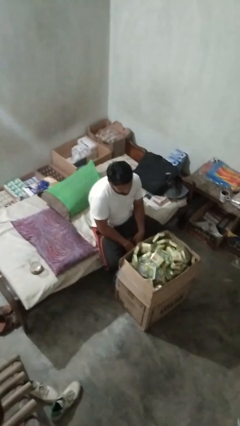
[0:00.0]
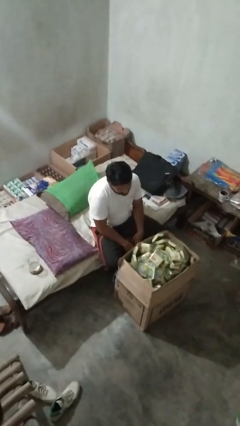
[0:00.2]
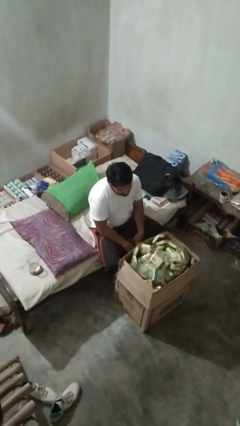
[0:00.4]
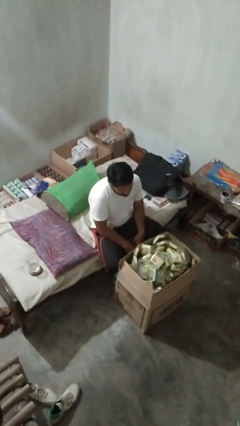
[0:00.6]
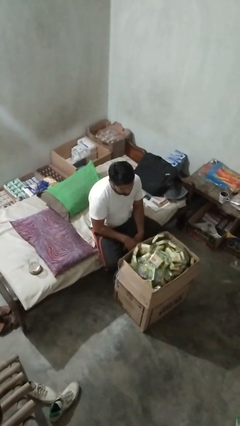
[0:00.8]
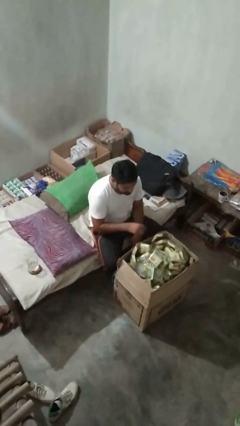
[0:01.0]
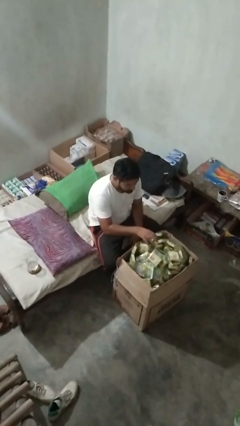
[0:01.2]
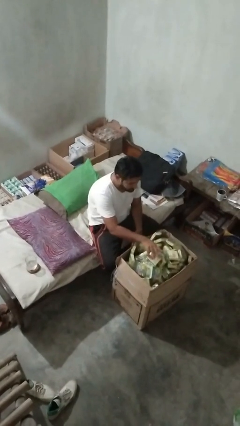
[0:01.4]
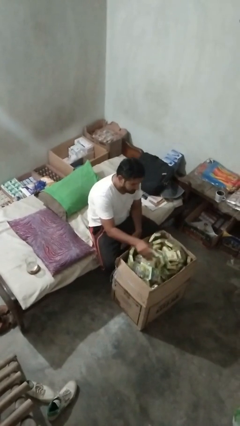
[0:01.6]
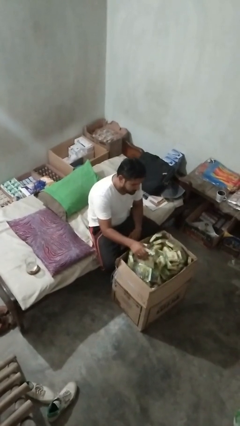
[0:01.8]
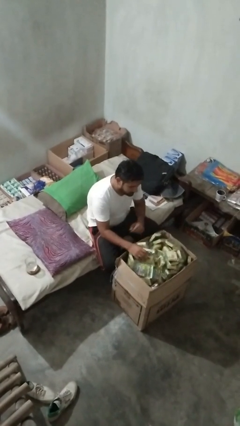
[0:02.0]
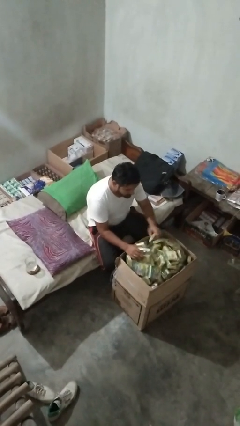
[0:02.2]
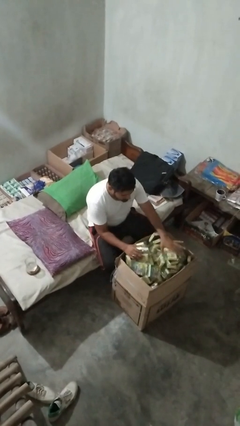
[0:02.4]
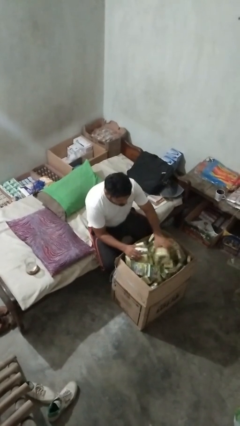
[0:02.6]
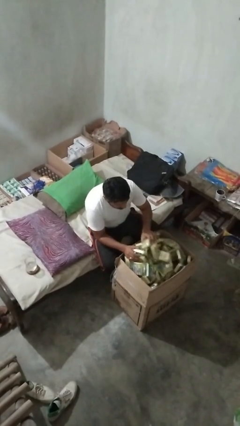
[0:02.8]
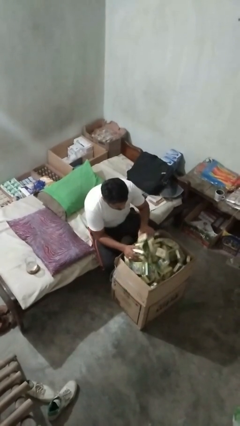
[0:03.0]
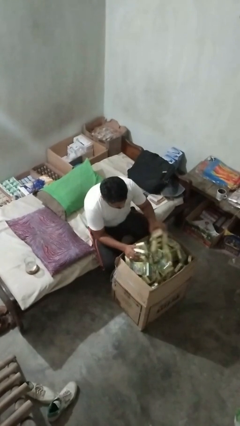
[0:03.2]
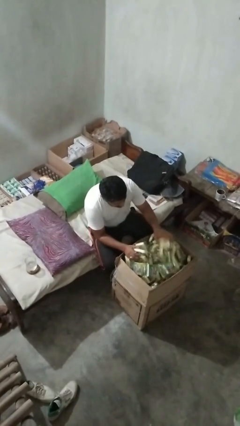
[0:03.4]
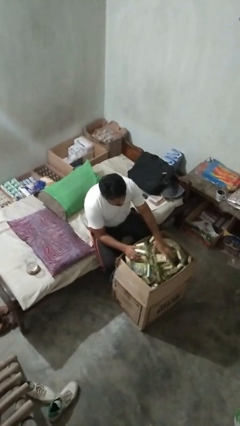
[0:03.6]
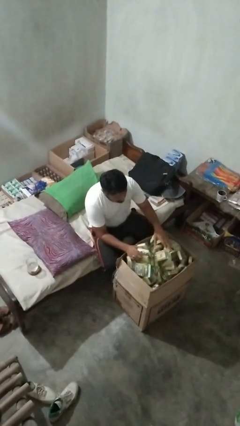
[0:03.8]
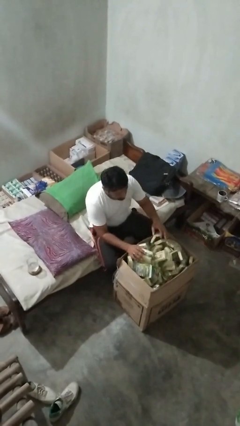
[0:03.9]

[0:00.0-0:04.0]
person searches in box

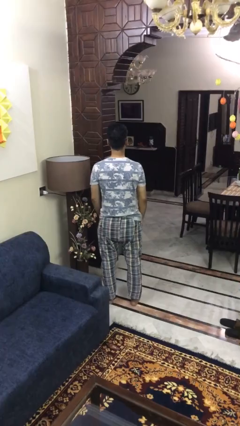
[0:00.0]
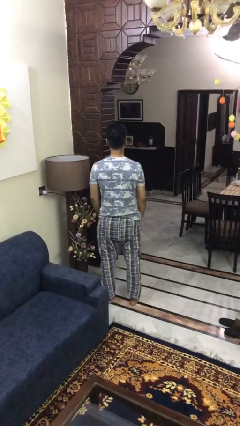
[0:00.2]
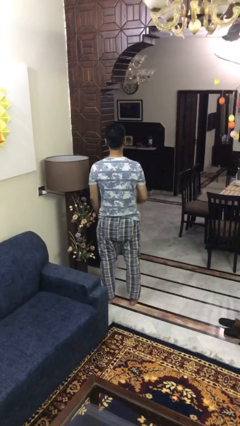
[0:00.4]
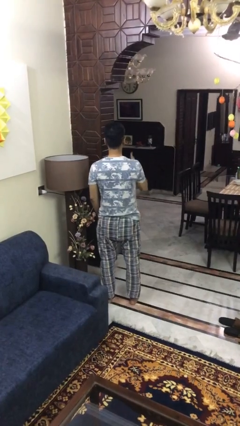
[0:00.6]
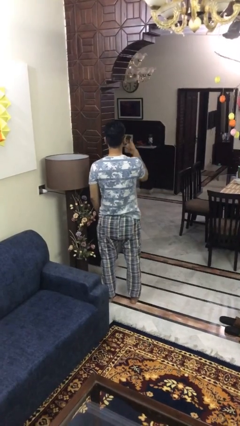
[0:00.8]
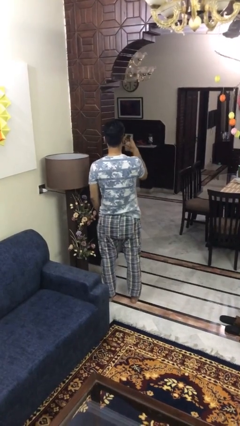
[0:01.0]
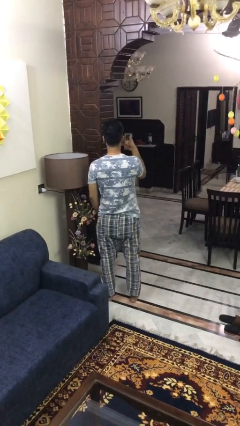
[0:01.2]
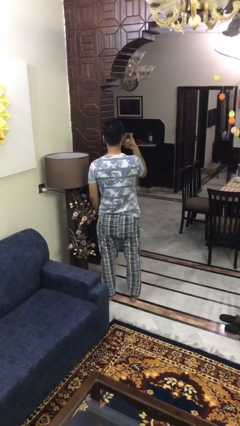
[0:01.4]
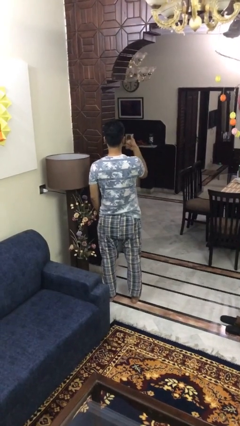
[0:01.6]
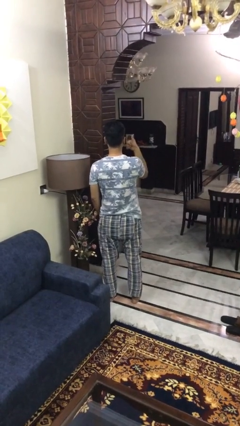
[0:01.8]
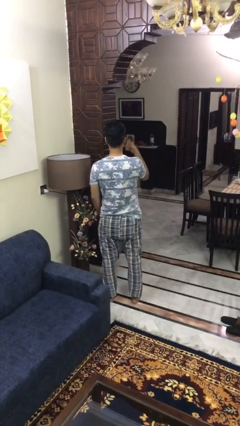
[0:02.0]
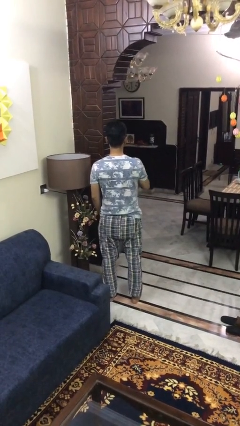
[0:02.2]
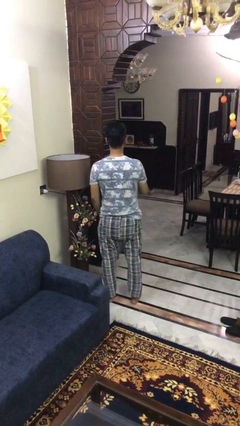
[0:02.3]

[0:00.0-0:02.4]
person gestures thumbs up

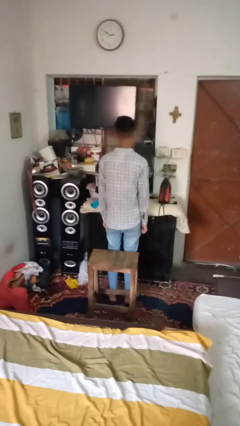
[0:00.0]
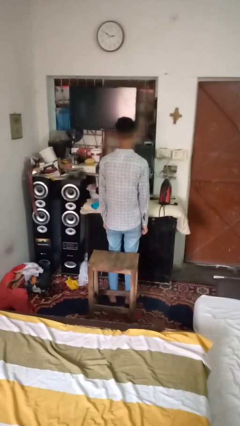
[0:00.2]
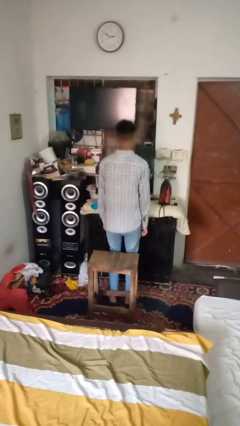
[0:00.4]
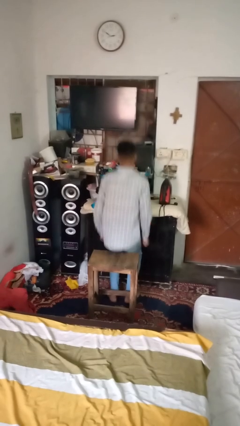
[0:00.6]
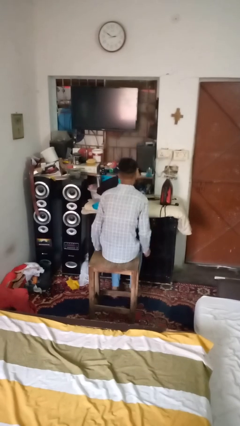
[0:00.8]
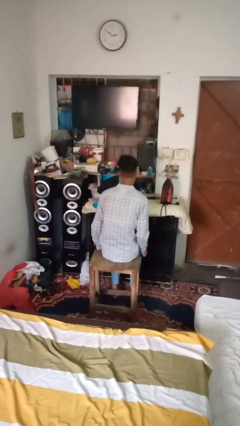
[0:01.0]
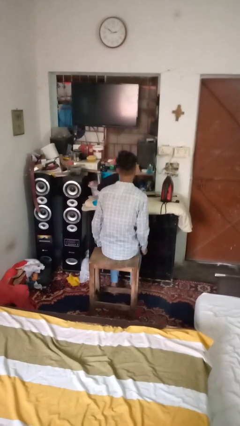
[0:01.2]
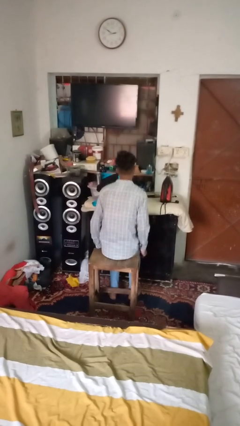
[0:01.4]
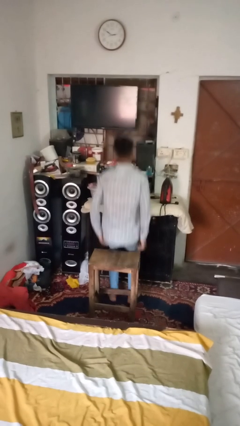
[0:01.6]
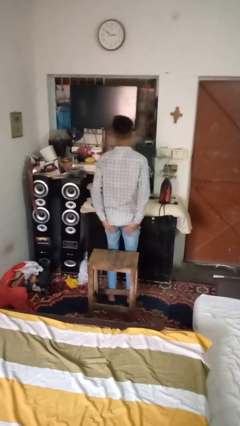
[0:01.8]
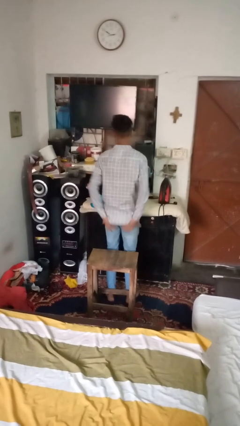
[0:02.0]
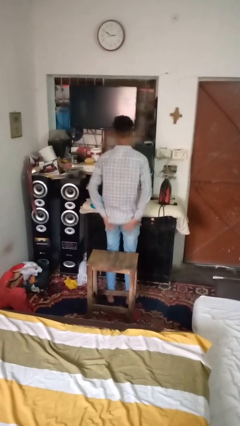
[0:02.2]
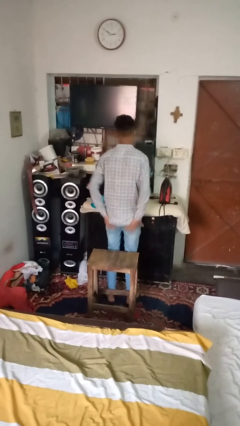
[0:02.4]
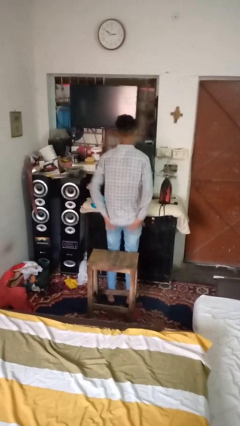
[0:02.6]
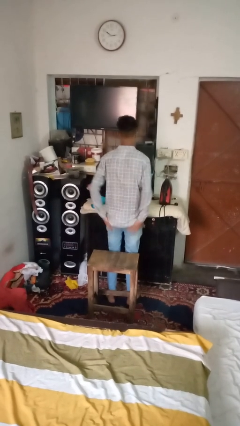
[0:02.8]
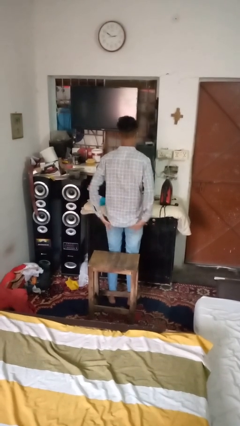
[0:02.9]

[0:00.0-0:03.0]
person bumps into table

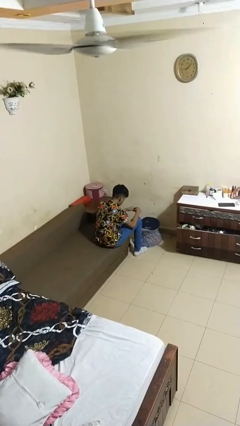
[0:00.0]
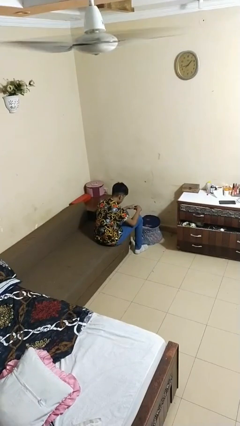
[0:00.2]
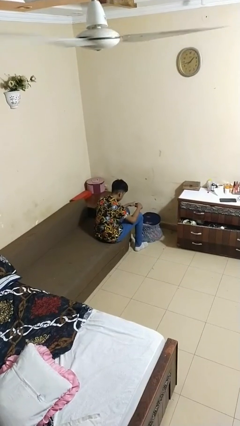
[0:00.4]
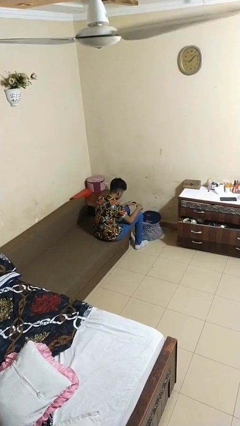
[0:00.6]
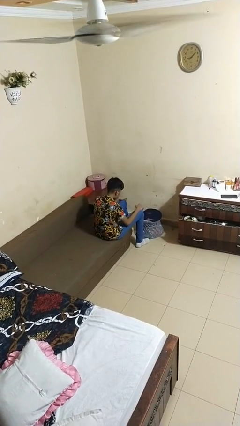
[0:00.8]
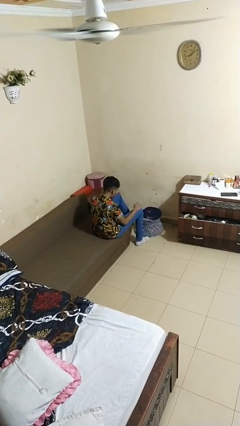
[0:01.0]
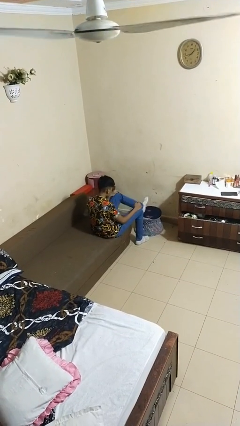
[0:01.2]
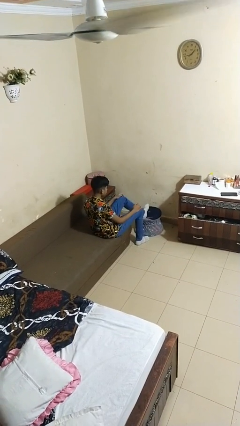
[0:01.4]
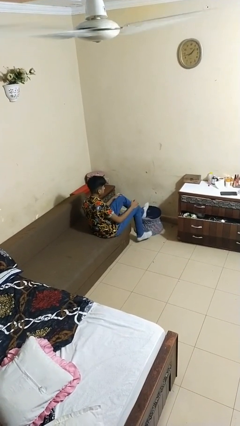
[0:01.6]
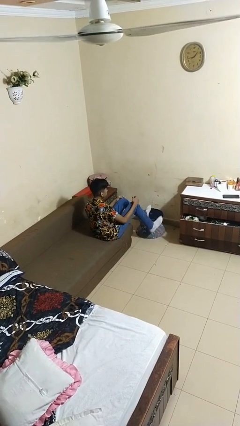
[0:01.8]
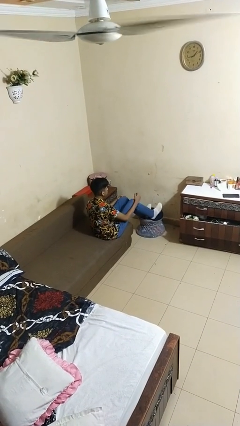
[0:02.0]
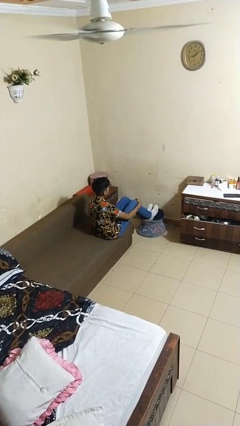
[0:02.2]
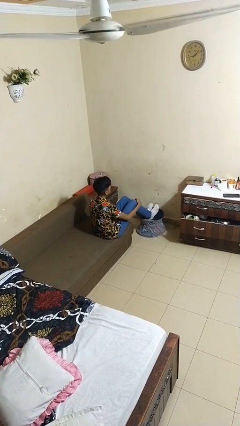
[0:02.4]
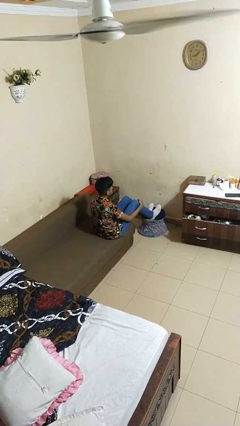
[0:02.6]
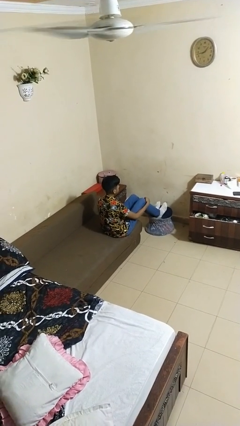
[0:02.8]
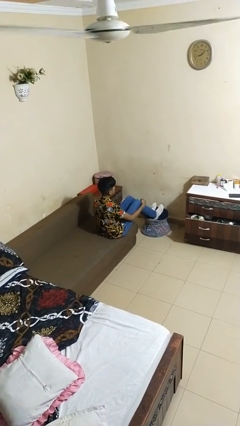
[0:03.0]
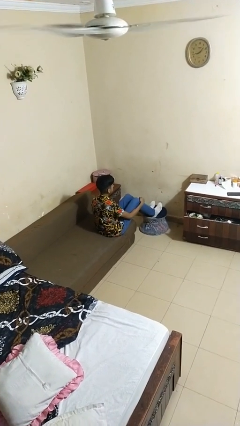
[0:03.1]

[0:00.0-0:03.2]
person puts feet up

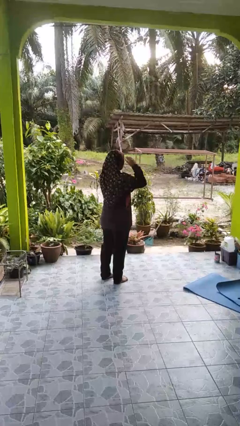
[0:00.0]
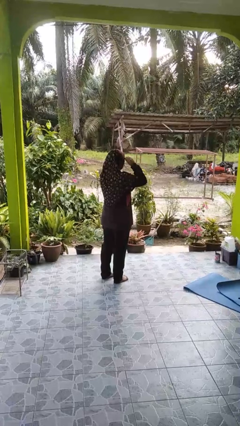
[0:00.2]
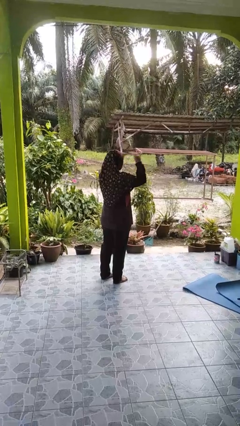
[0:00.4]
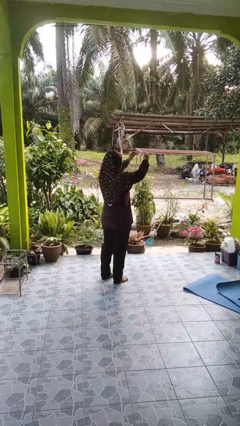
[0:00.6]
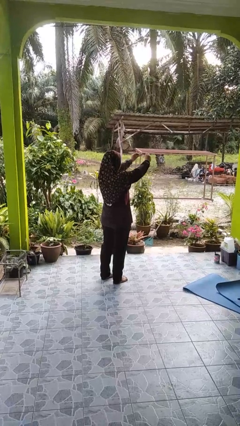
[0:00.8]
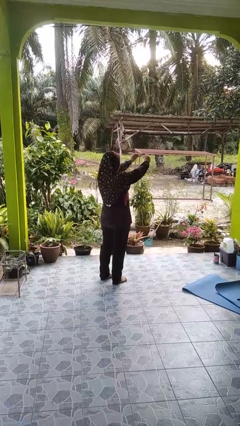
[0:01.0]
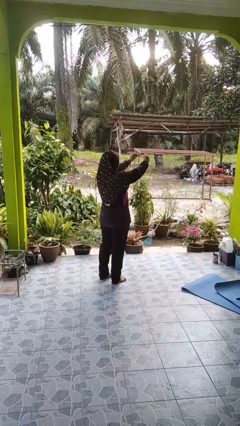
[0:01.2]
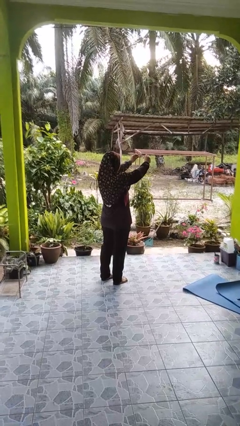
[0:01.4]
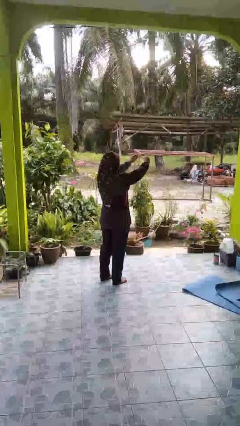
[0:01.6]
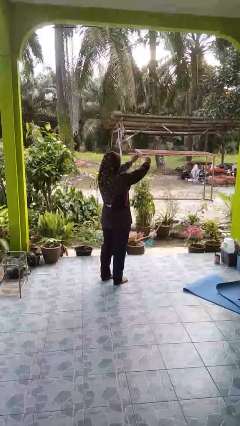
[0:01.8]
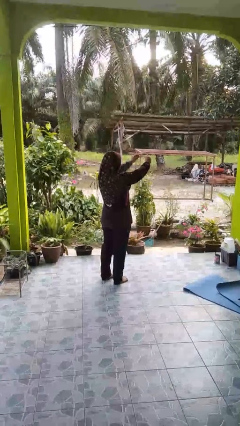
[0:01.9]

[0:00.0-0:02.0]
person takes off glasses

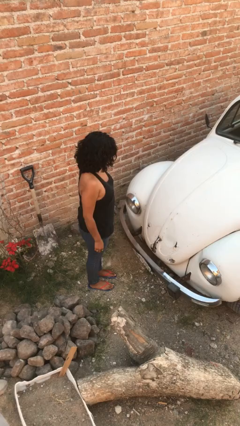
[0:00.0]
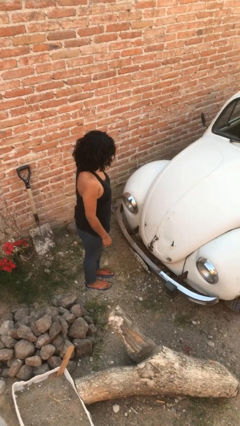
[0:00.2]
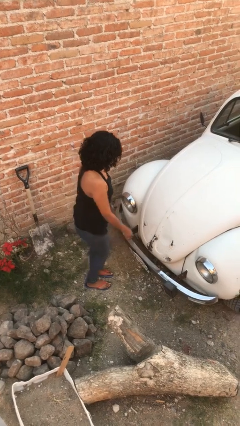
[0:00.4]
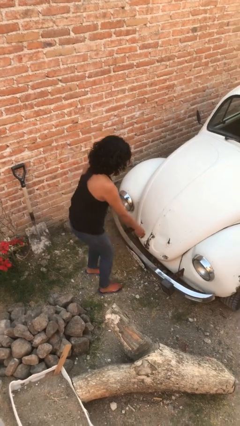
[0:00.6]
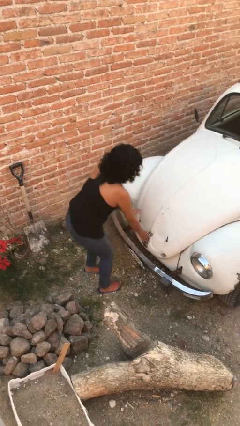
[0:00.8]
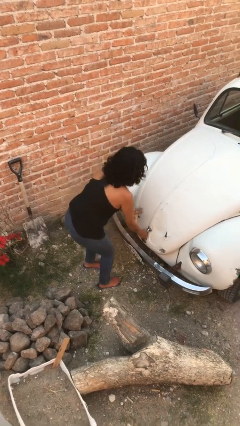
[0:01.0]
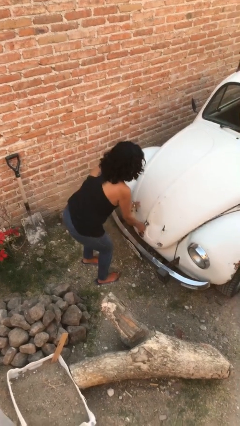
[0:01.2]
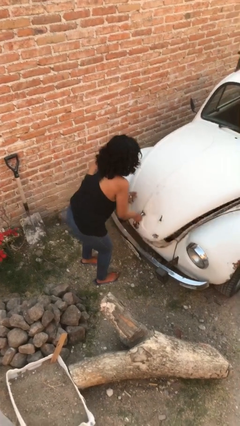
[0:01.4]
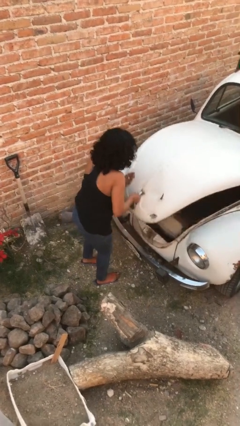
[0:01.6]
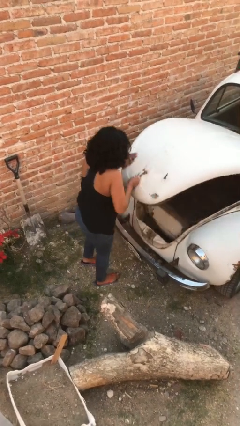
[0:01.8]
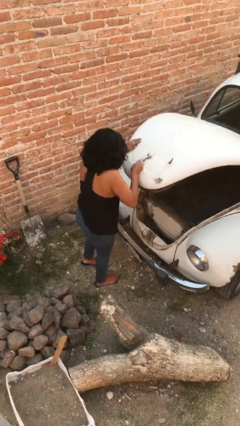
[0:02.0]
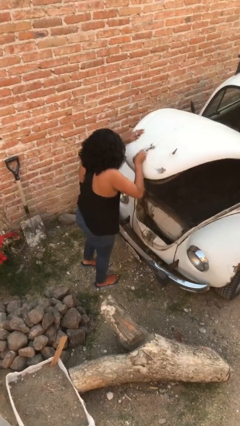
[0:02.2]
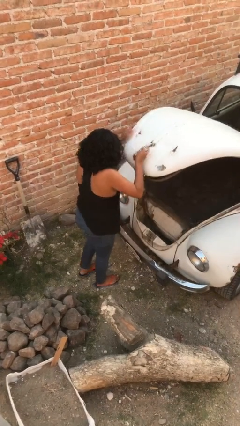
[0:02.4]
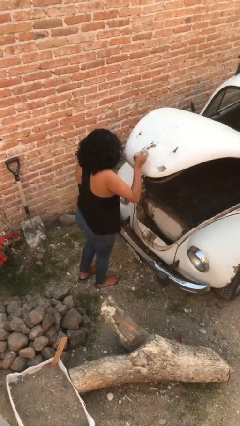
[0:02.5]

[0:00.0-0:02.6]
person opens car trunk

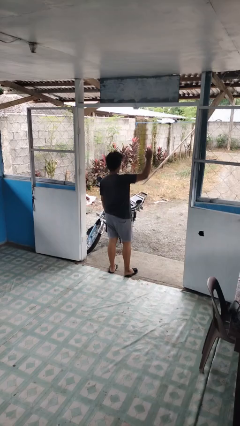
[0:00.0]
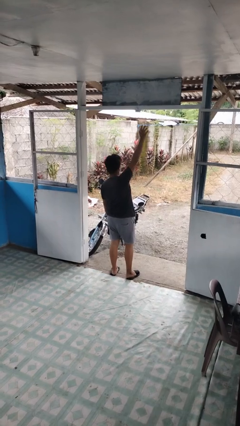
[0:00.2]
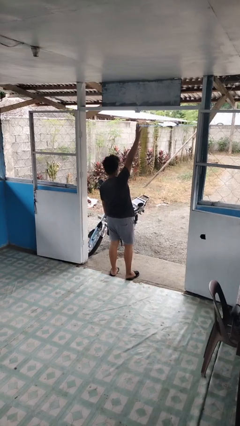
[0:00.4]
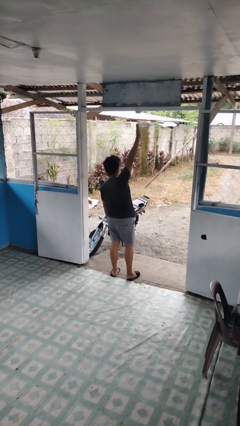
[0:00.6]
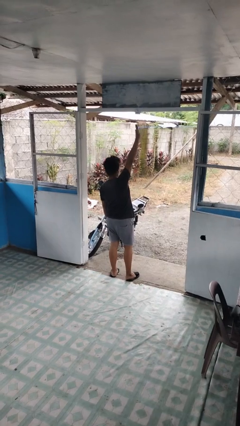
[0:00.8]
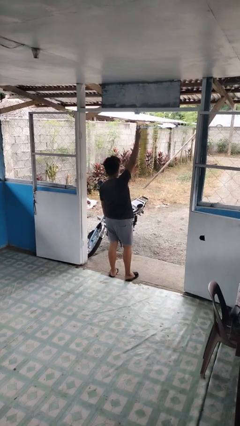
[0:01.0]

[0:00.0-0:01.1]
person gestures raise hand
